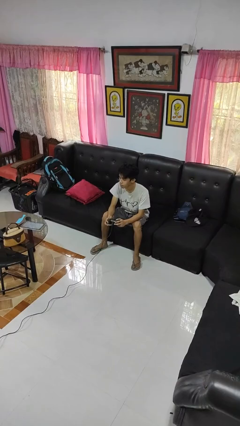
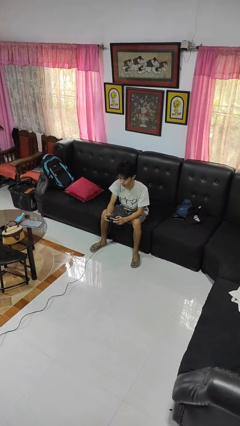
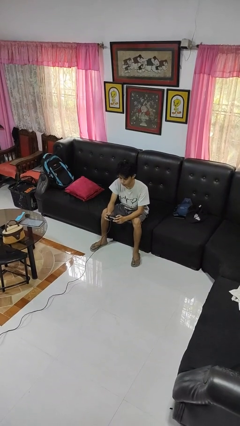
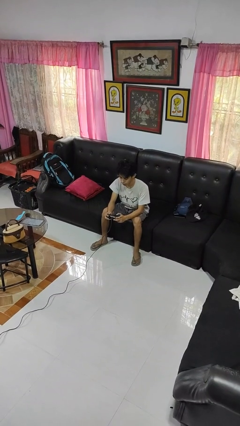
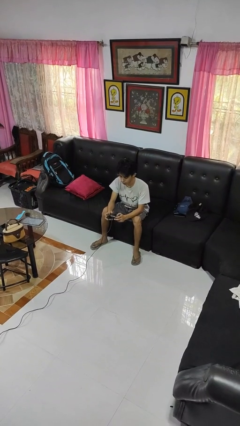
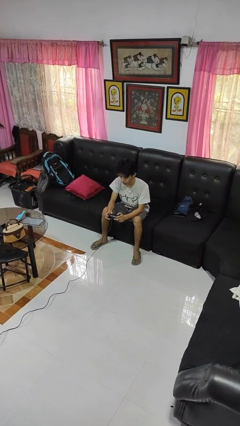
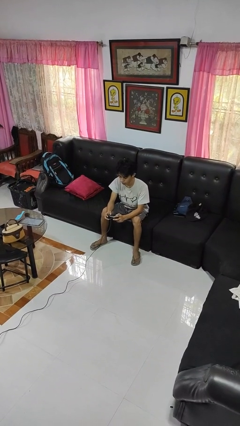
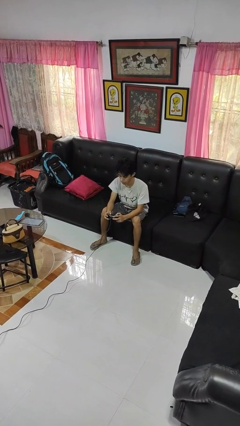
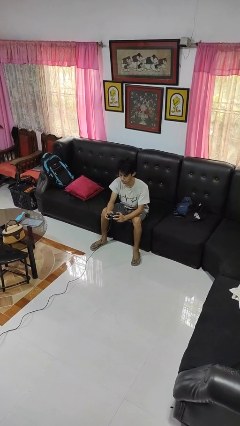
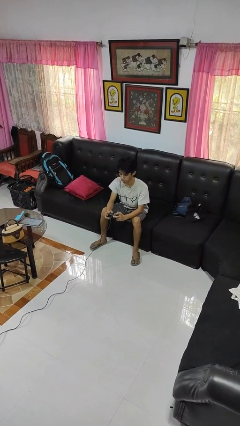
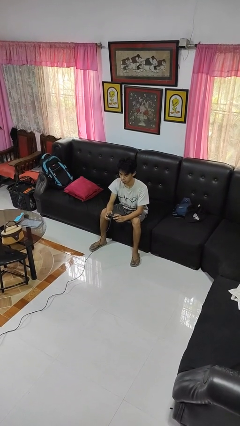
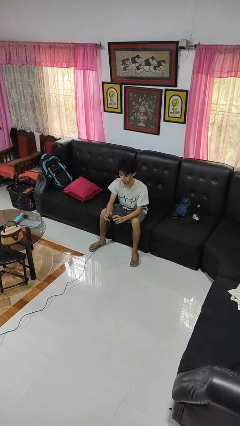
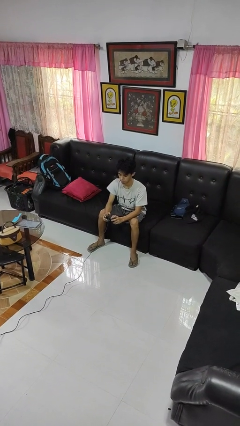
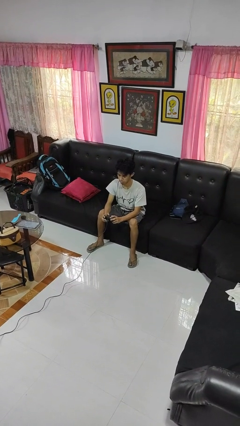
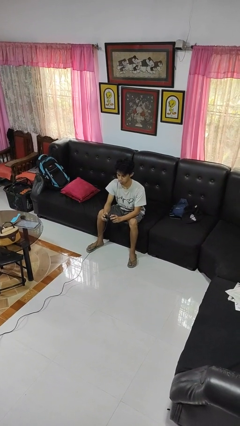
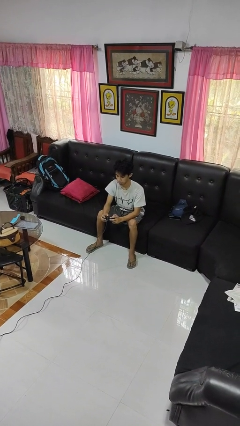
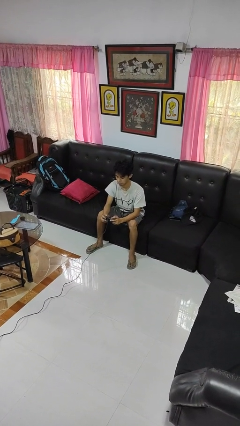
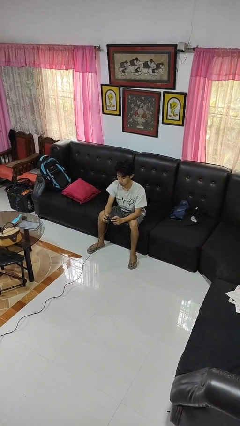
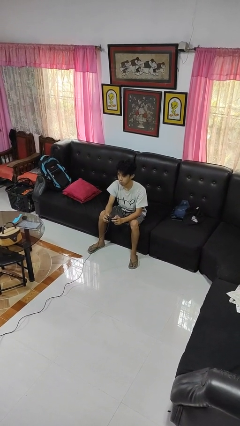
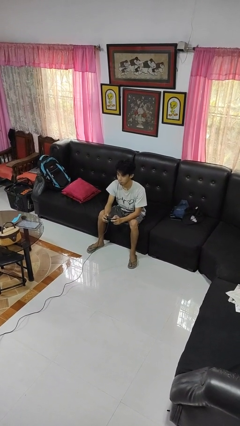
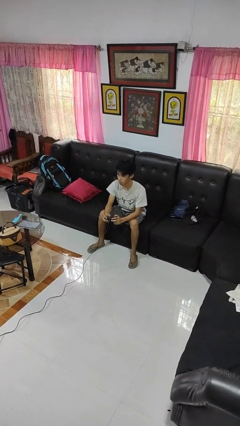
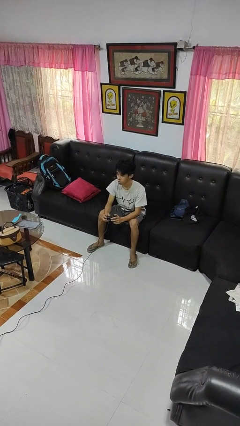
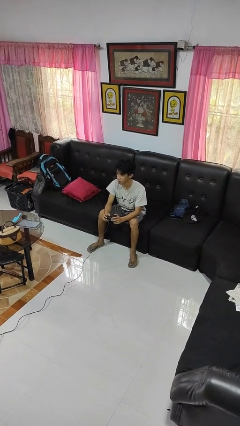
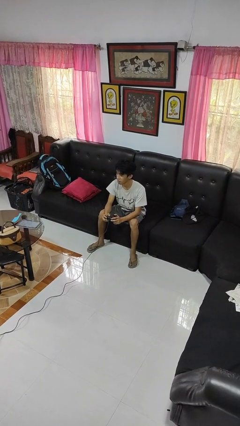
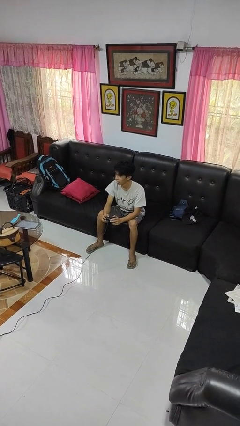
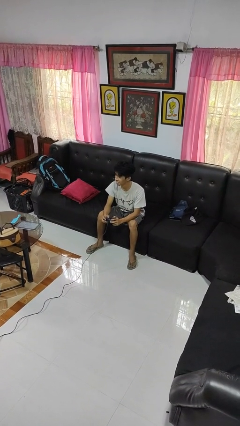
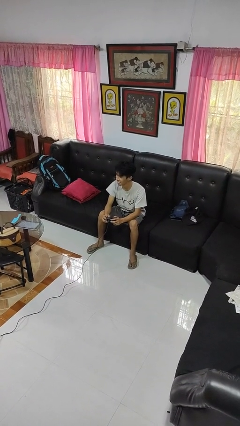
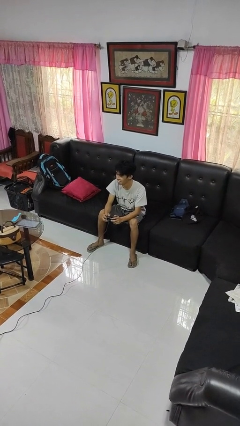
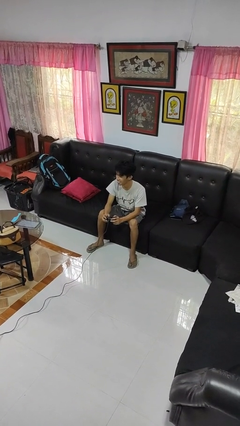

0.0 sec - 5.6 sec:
person interacts with handheld game

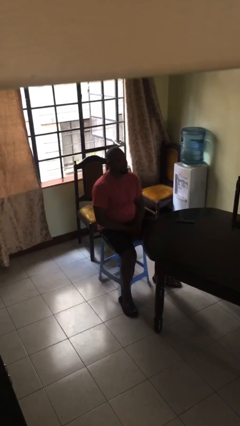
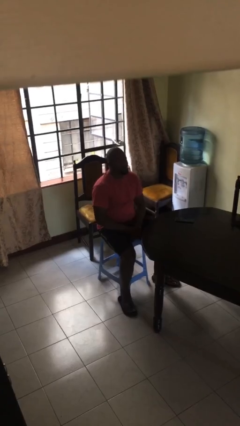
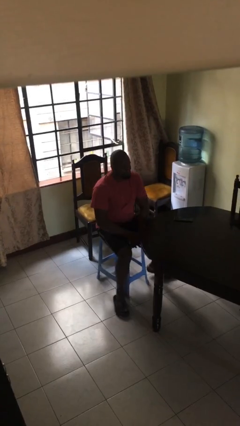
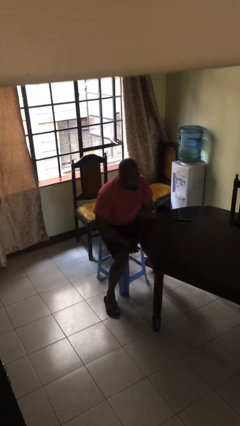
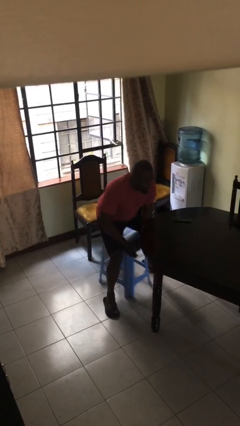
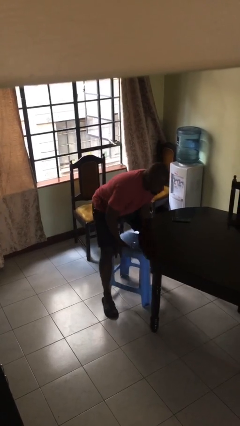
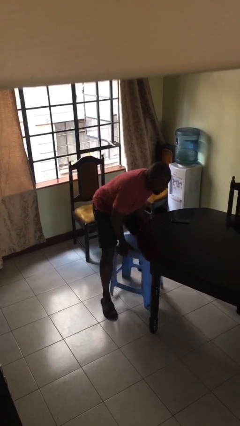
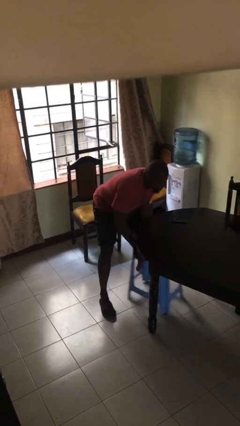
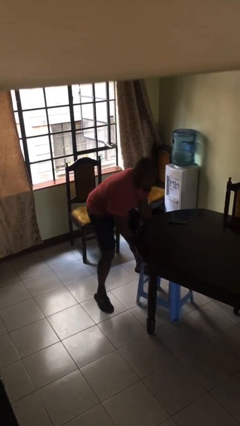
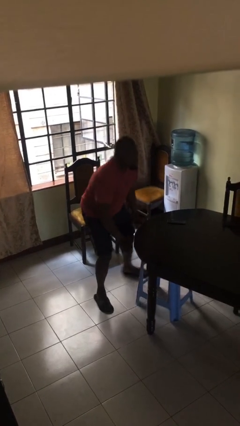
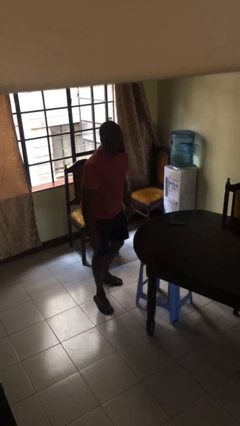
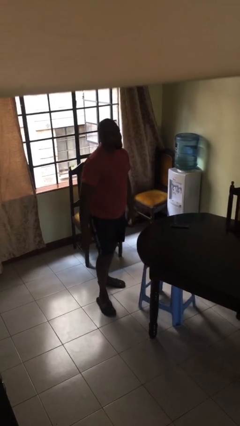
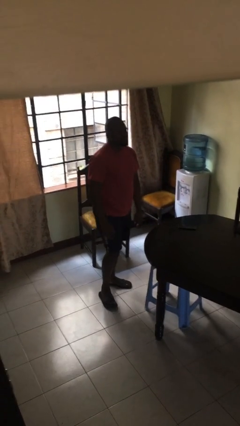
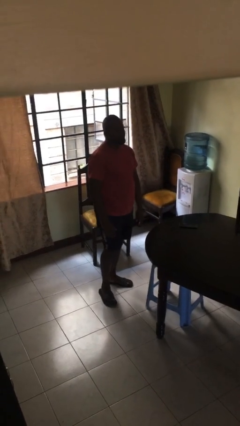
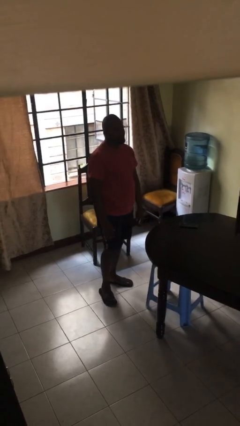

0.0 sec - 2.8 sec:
person stands up

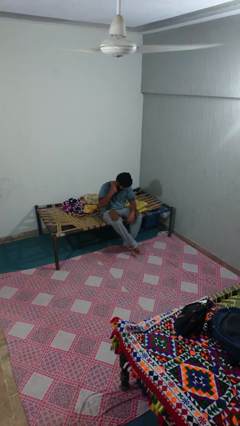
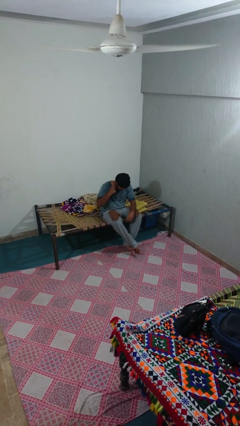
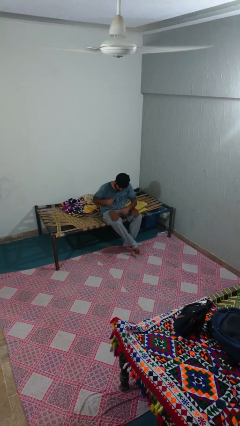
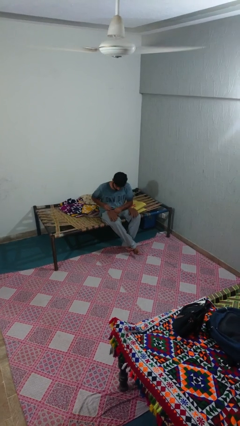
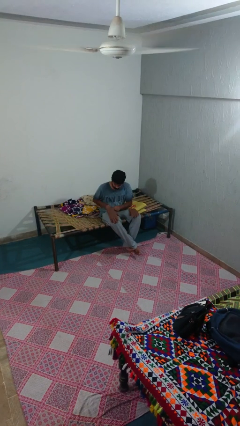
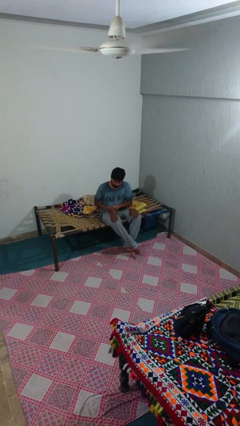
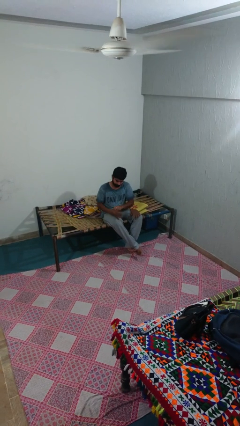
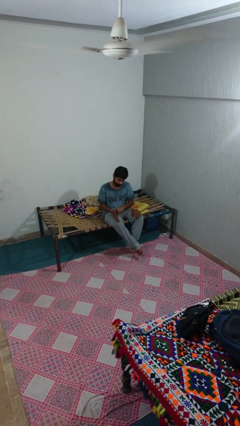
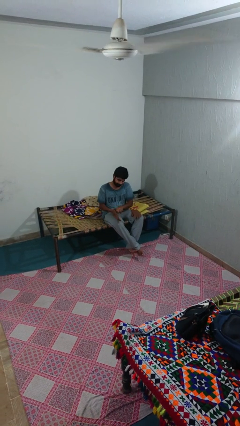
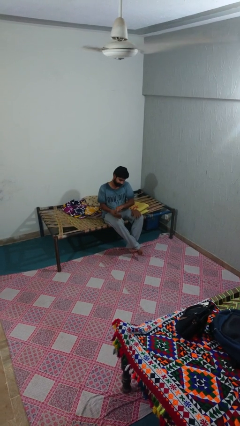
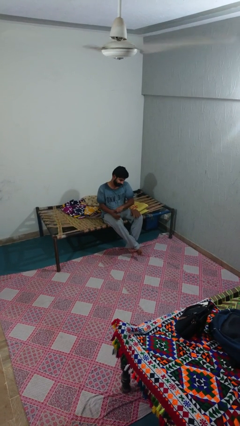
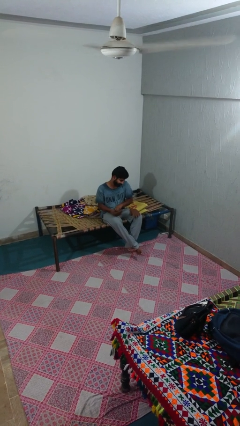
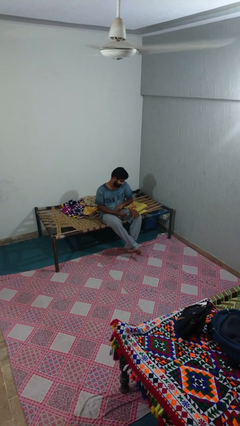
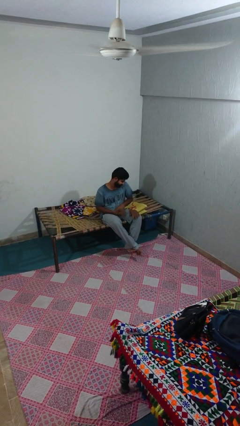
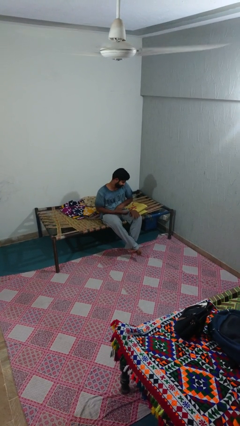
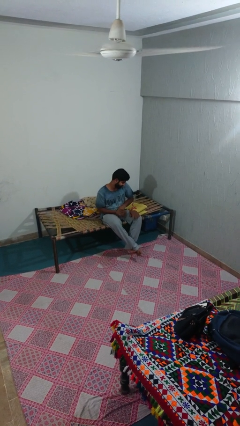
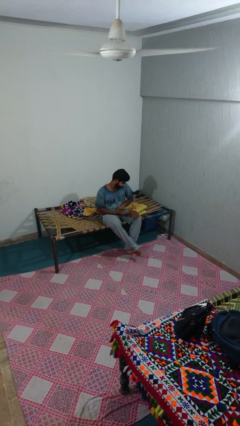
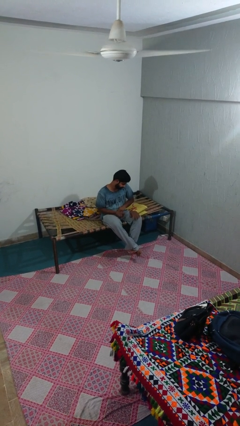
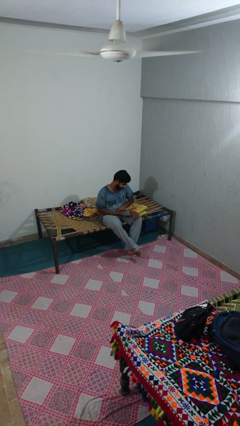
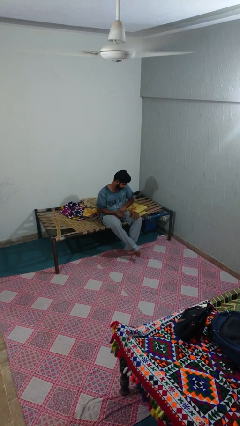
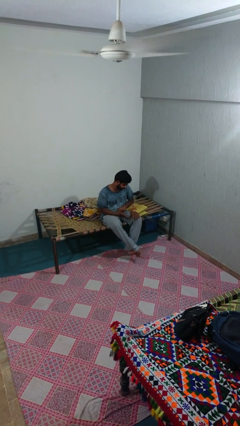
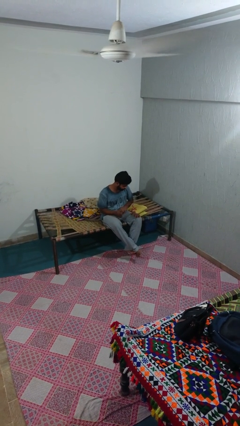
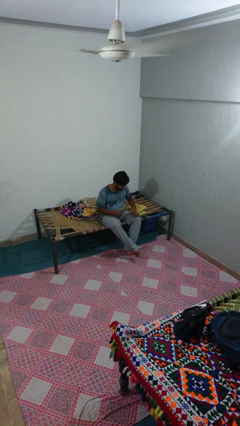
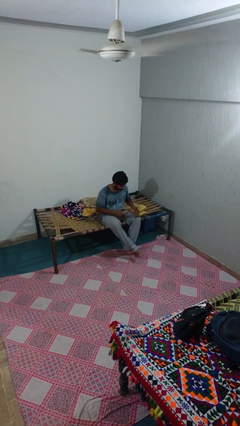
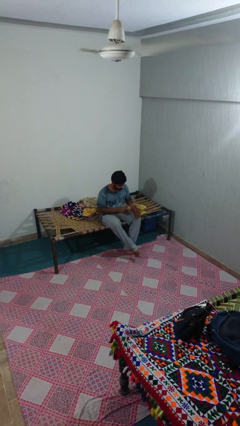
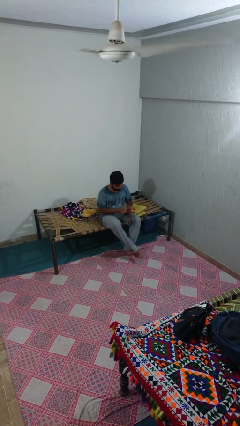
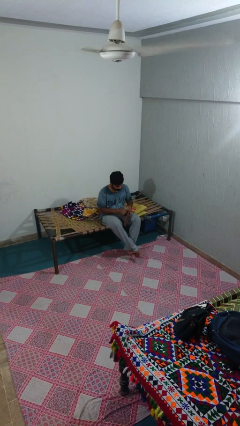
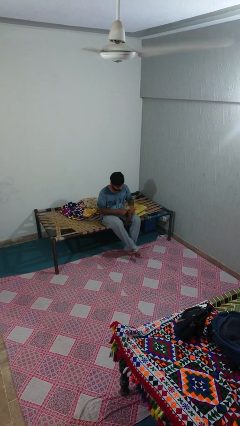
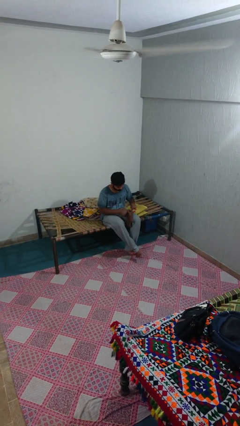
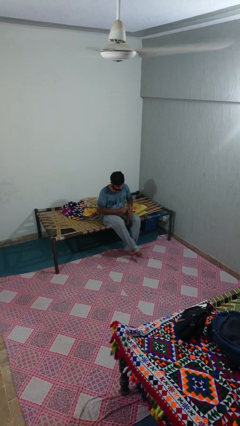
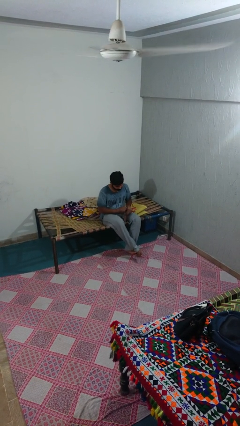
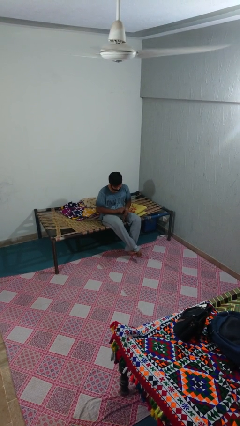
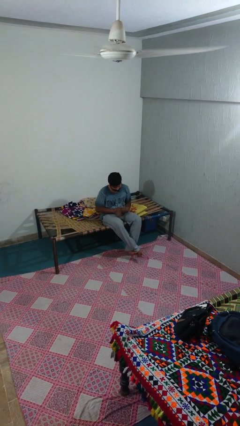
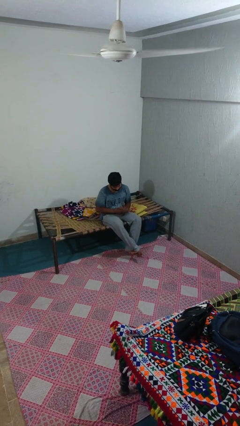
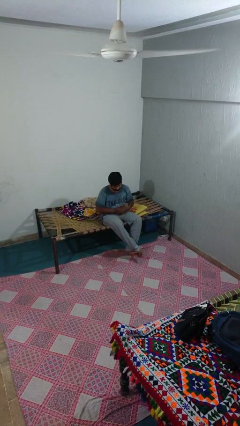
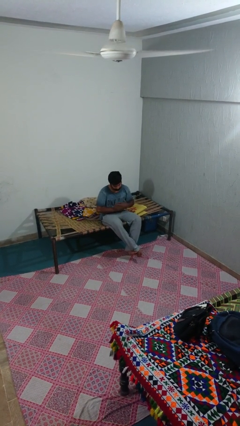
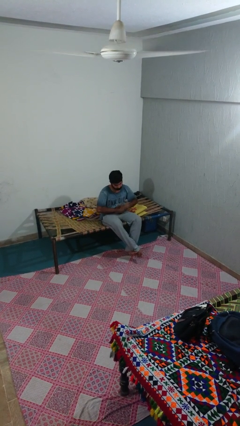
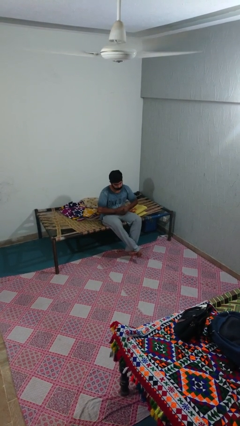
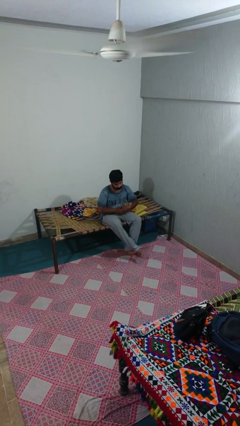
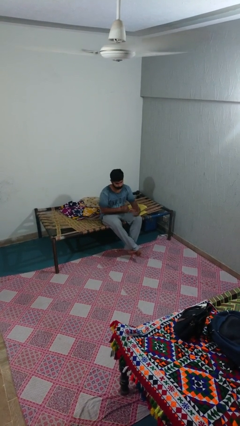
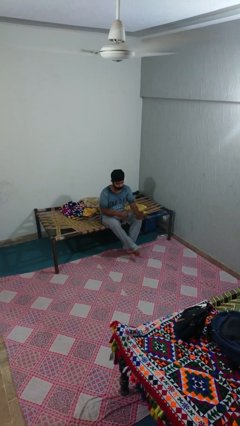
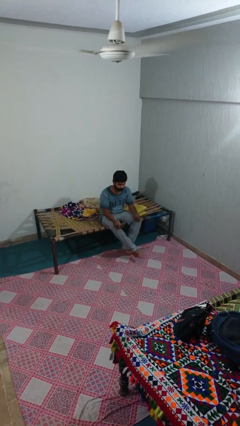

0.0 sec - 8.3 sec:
person puts on gloves

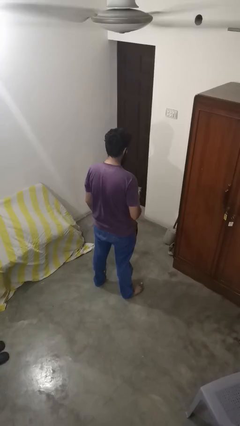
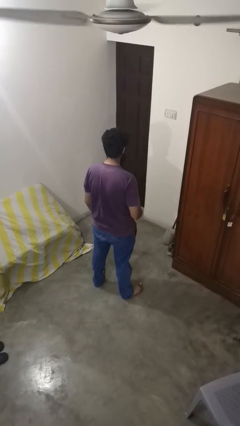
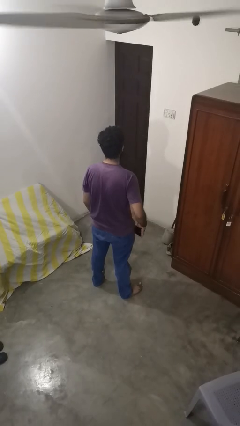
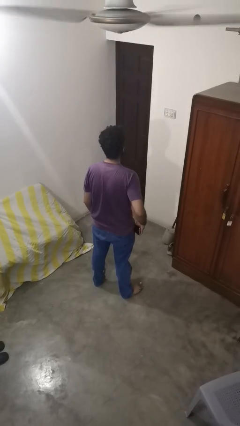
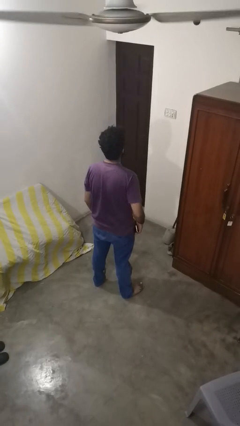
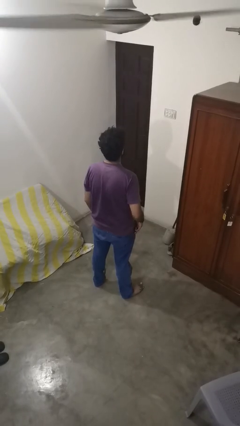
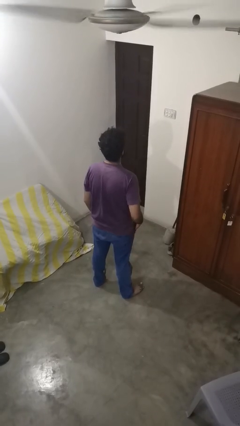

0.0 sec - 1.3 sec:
person puts phone into pocket
